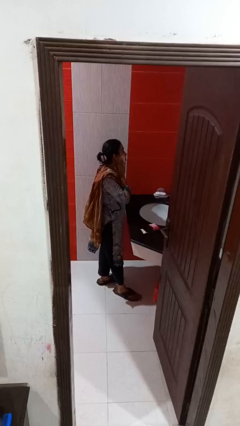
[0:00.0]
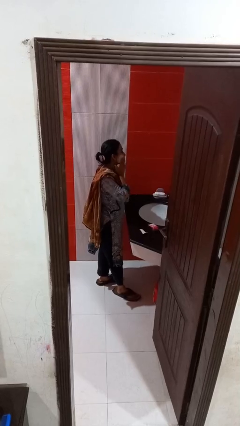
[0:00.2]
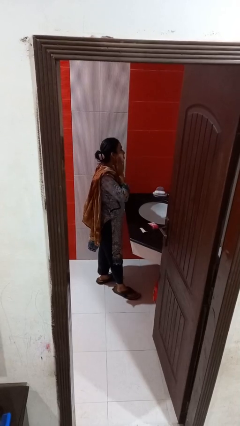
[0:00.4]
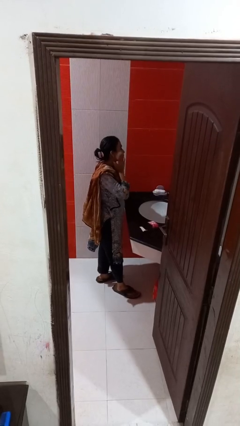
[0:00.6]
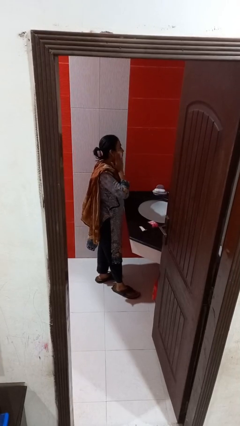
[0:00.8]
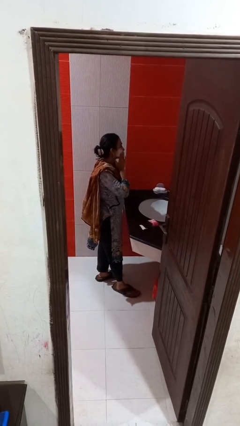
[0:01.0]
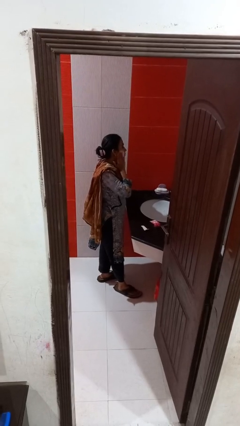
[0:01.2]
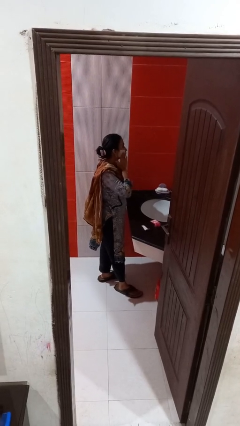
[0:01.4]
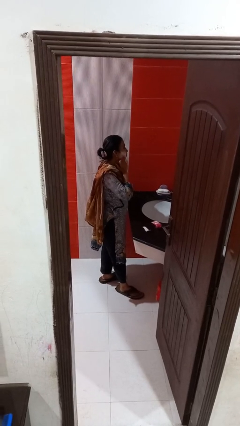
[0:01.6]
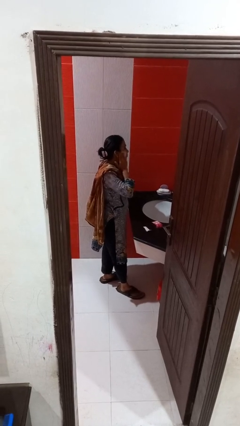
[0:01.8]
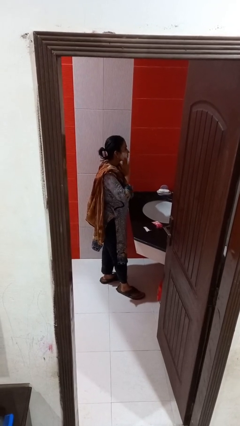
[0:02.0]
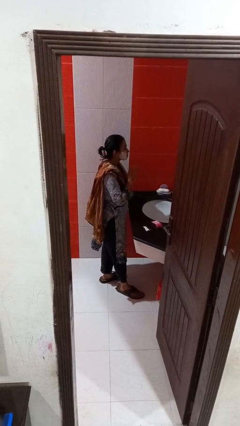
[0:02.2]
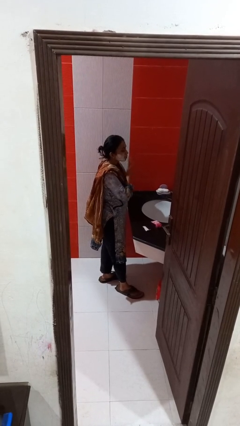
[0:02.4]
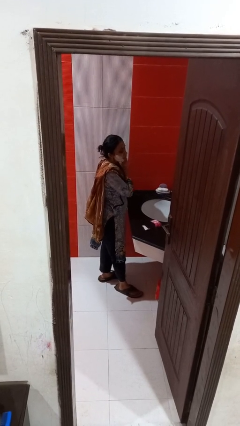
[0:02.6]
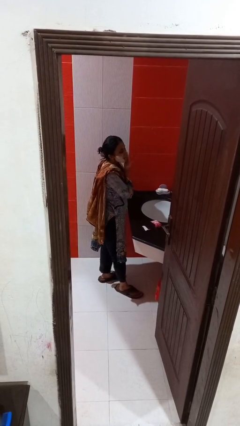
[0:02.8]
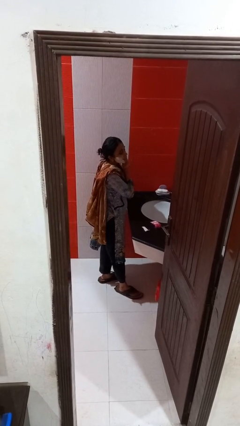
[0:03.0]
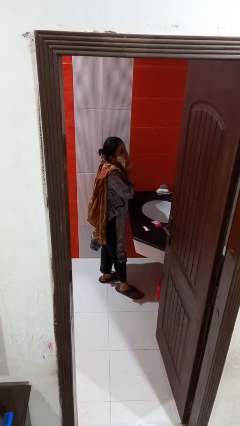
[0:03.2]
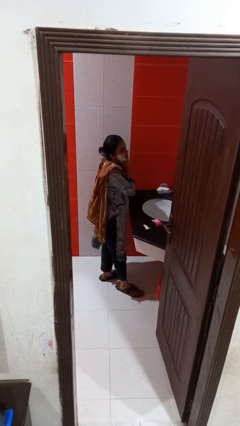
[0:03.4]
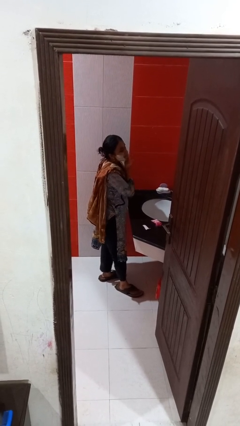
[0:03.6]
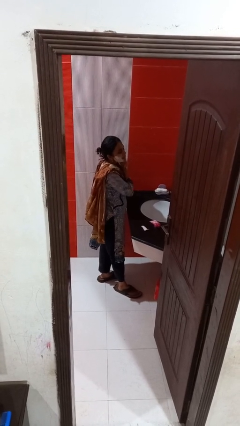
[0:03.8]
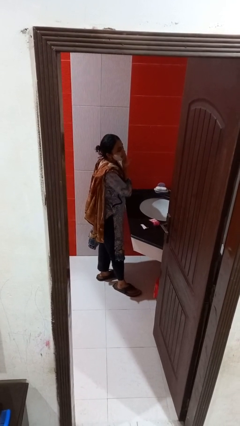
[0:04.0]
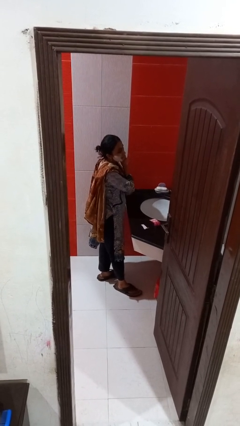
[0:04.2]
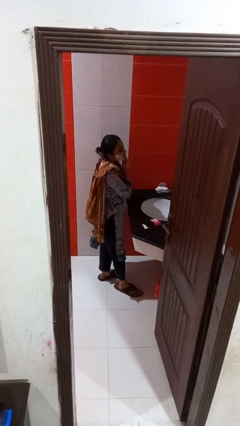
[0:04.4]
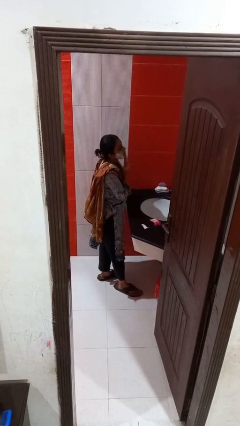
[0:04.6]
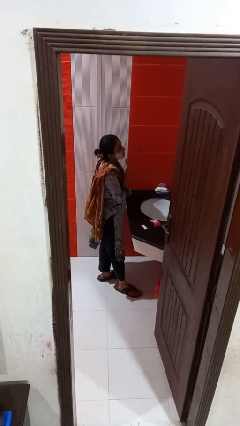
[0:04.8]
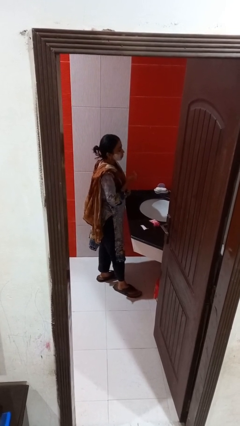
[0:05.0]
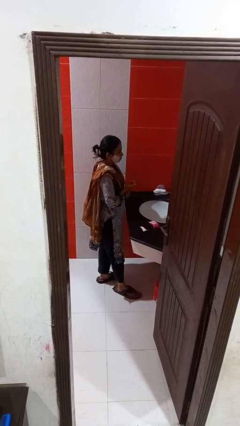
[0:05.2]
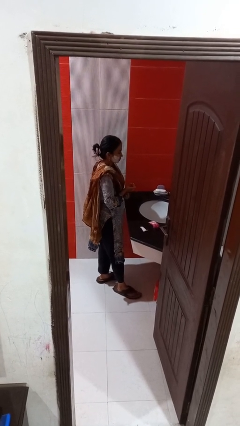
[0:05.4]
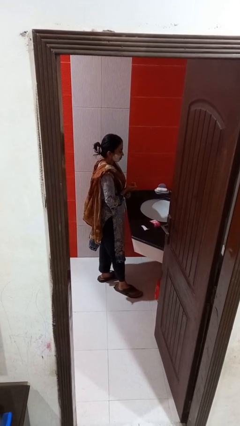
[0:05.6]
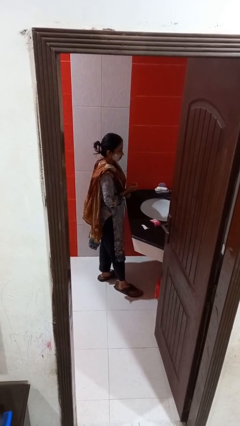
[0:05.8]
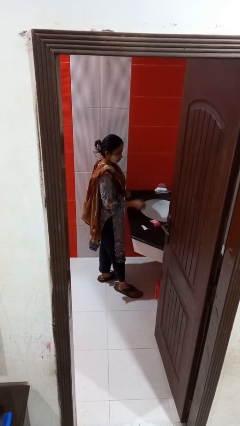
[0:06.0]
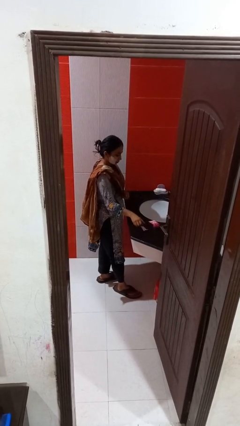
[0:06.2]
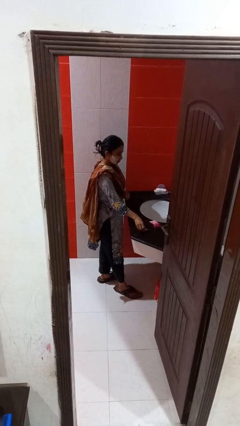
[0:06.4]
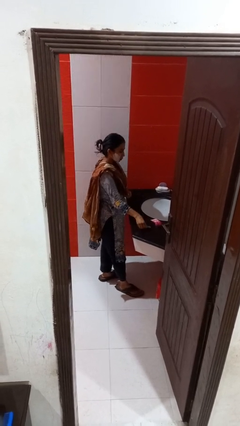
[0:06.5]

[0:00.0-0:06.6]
person applies shaving cream

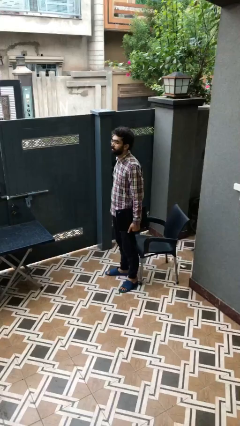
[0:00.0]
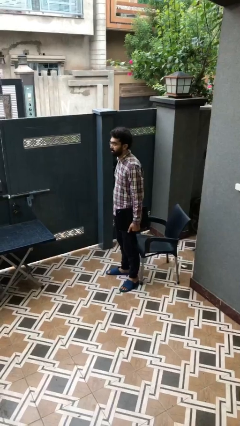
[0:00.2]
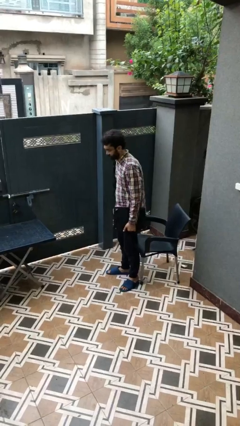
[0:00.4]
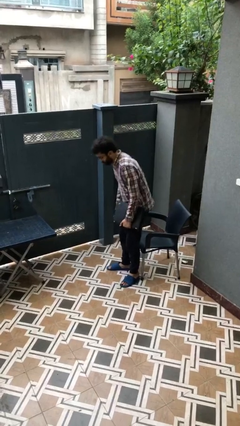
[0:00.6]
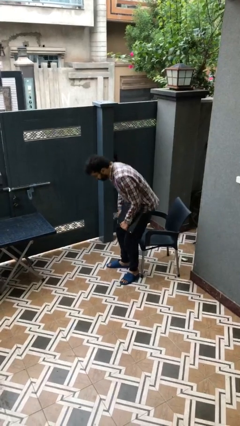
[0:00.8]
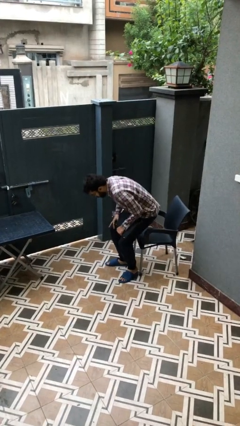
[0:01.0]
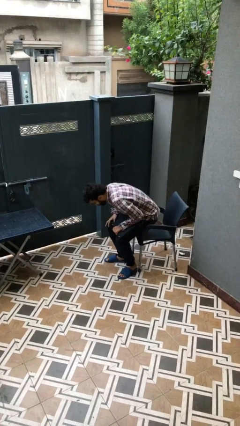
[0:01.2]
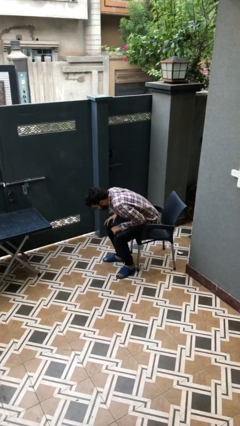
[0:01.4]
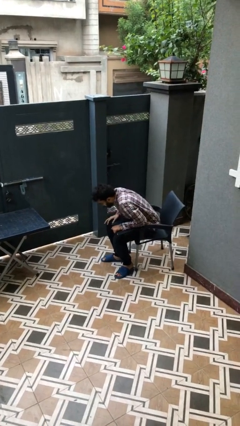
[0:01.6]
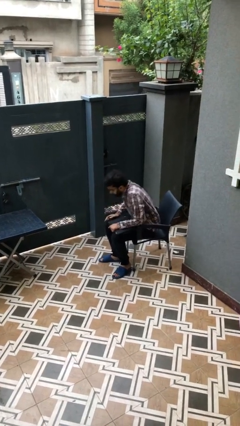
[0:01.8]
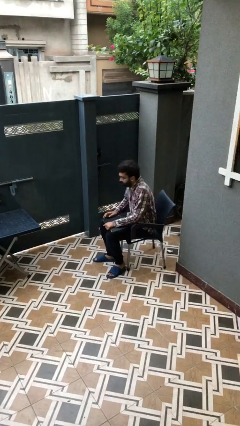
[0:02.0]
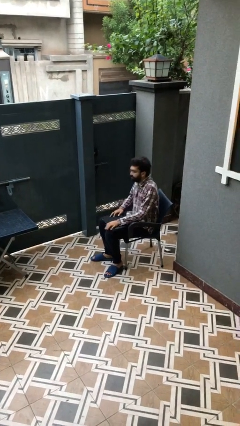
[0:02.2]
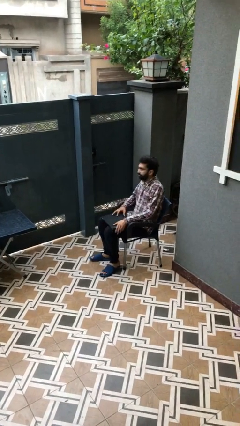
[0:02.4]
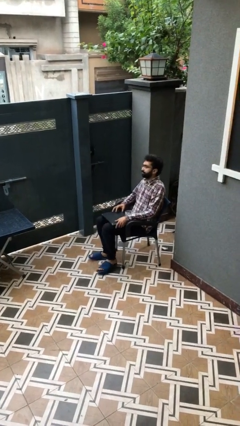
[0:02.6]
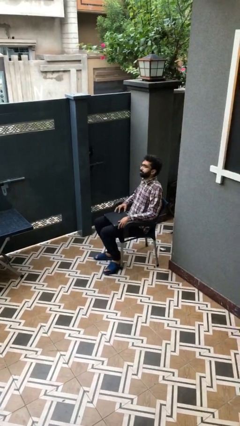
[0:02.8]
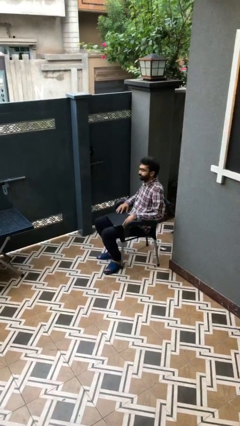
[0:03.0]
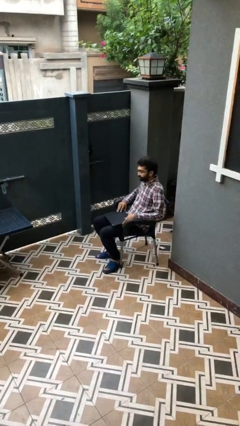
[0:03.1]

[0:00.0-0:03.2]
person sits down

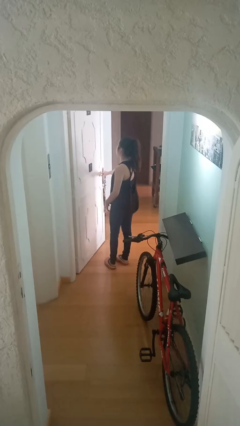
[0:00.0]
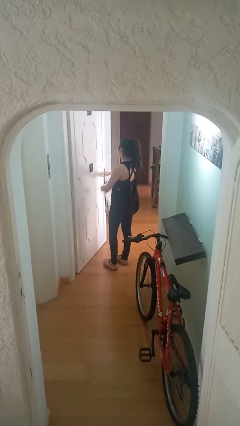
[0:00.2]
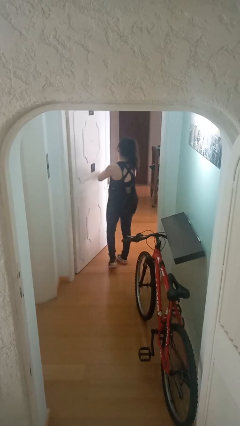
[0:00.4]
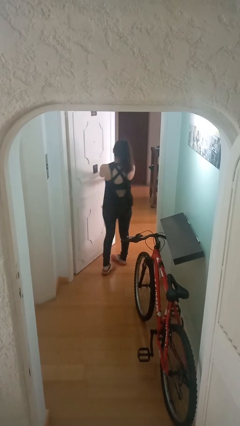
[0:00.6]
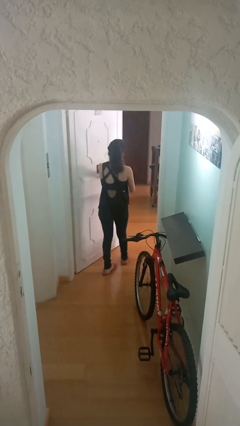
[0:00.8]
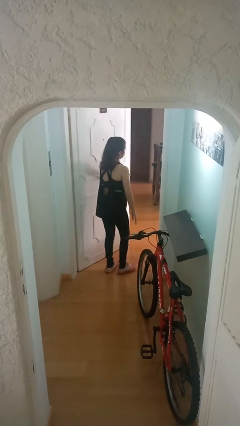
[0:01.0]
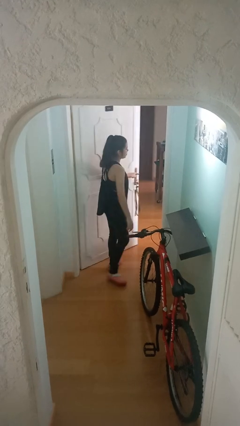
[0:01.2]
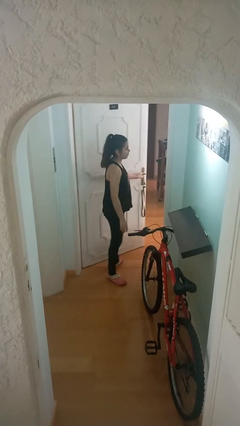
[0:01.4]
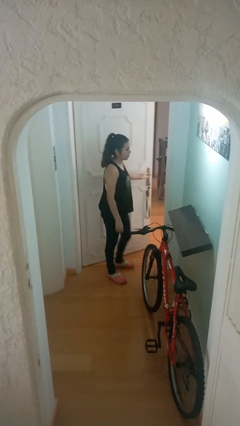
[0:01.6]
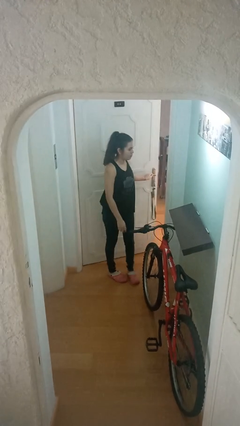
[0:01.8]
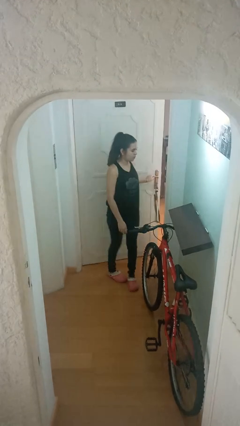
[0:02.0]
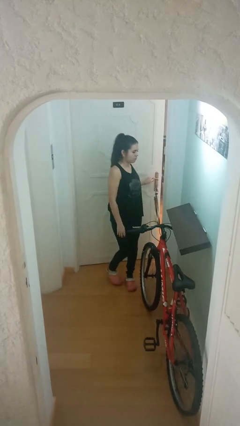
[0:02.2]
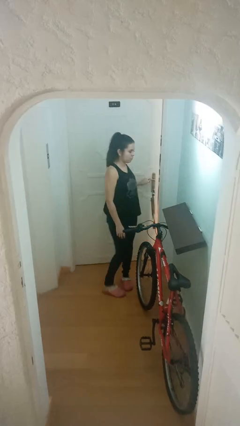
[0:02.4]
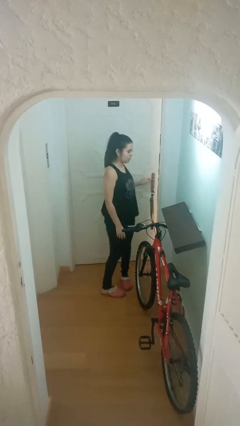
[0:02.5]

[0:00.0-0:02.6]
person closes facility door

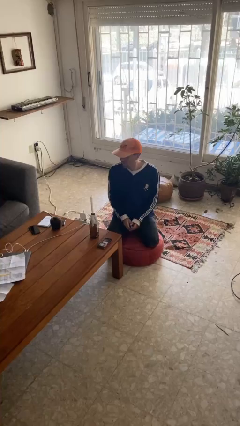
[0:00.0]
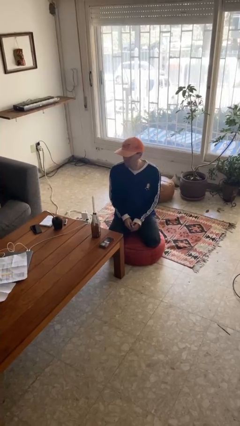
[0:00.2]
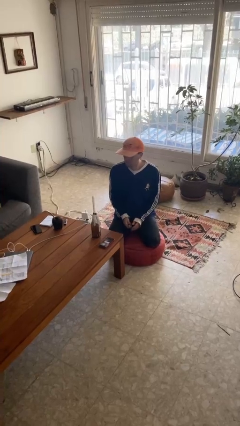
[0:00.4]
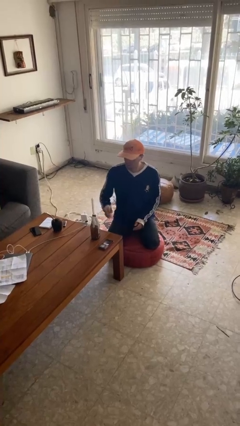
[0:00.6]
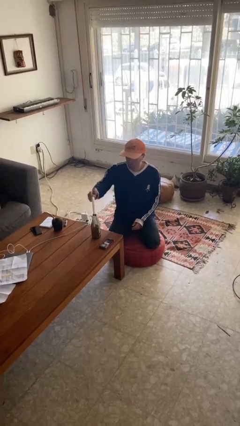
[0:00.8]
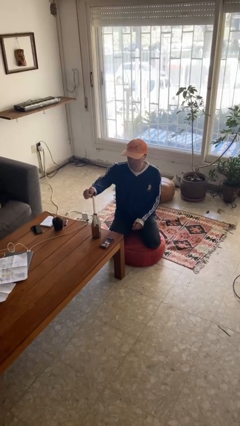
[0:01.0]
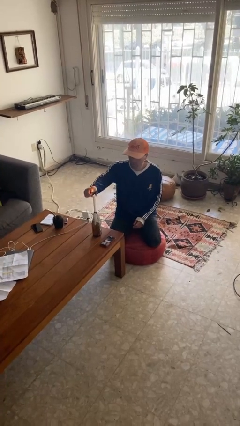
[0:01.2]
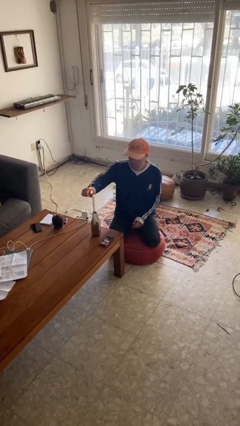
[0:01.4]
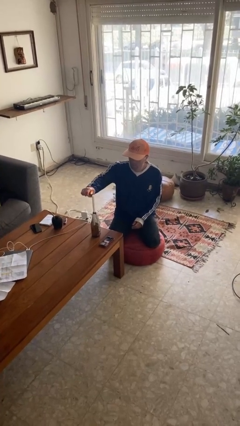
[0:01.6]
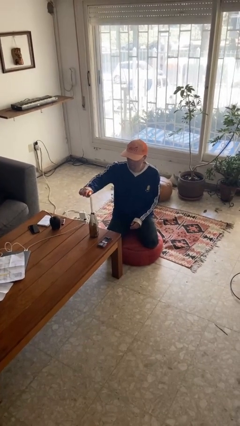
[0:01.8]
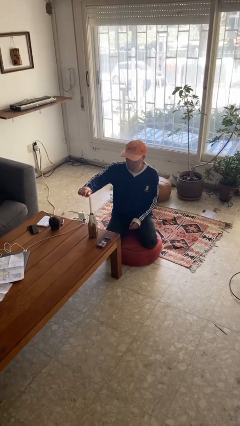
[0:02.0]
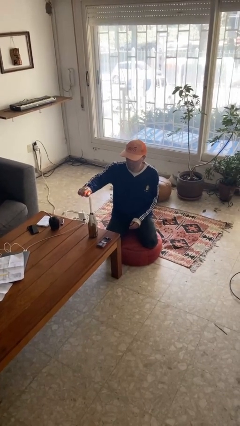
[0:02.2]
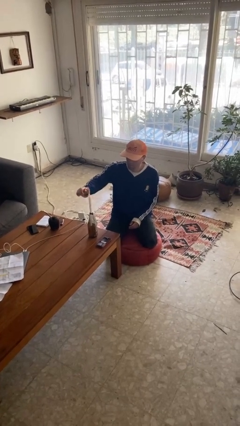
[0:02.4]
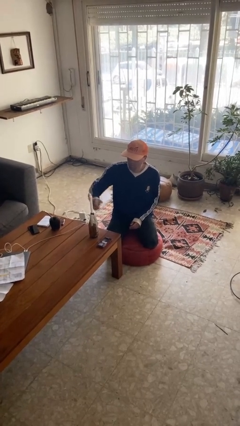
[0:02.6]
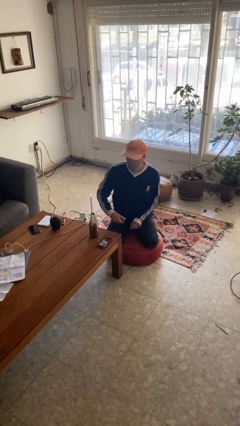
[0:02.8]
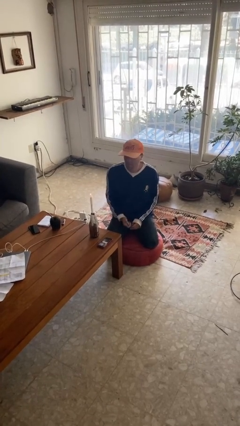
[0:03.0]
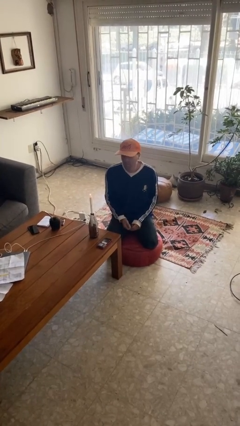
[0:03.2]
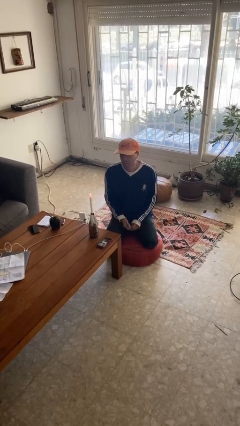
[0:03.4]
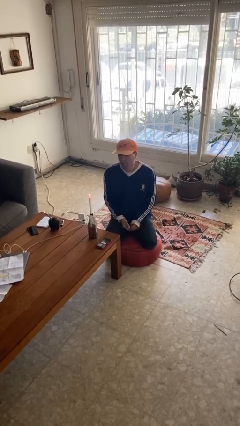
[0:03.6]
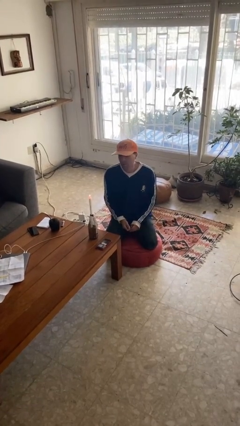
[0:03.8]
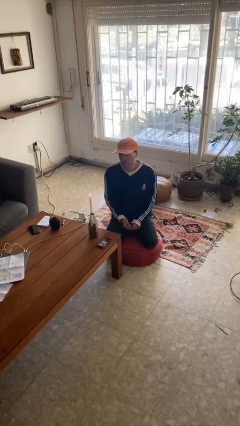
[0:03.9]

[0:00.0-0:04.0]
person lights candle

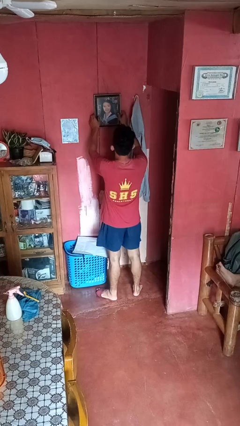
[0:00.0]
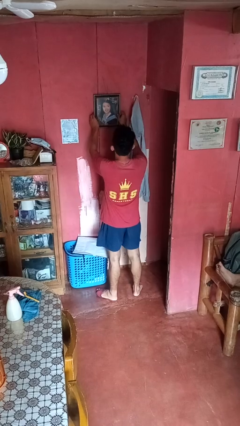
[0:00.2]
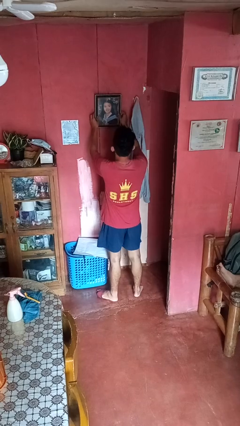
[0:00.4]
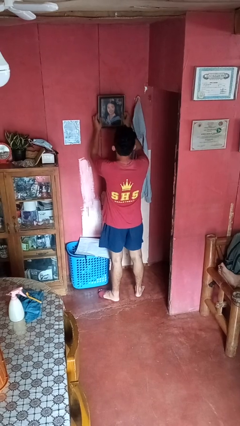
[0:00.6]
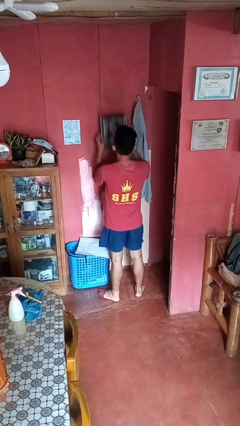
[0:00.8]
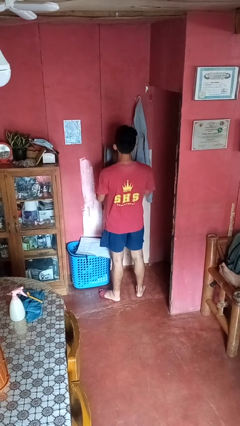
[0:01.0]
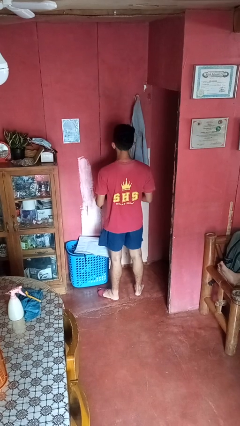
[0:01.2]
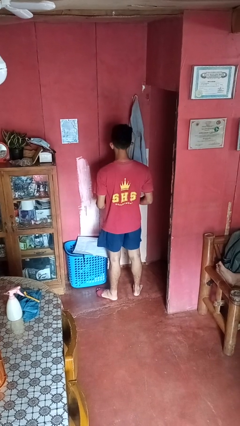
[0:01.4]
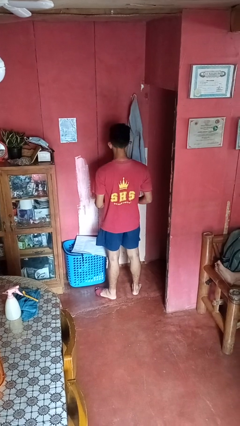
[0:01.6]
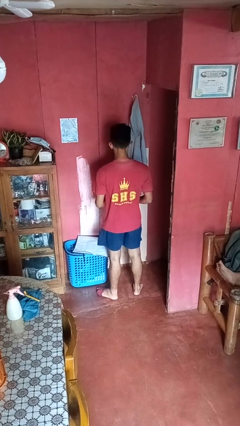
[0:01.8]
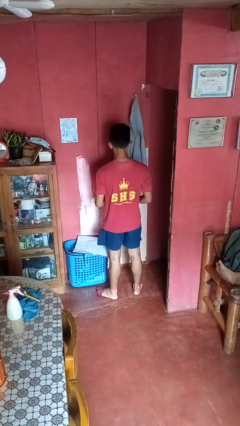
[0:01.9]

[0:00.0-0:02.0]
person takes down picture frame
